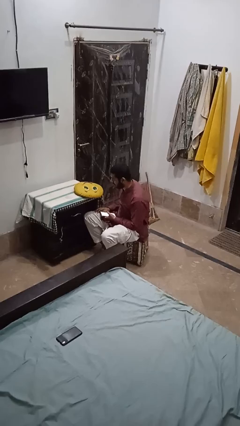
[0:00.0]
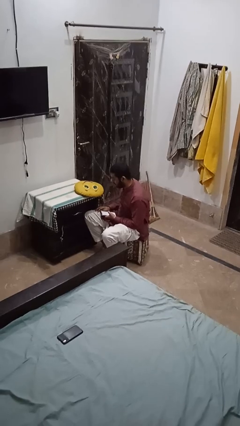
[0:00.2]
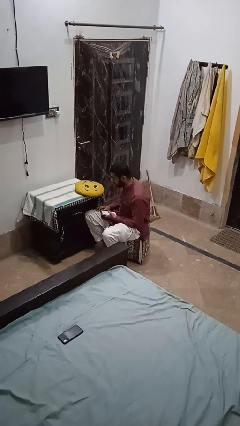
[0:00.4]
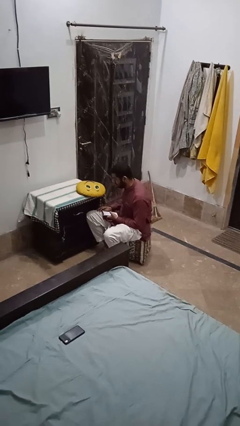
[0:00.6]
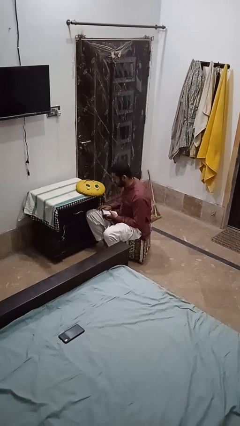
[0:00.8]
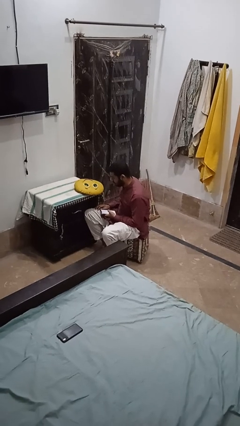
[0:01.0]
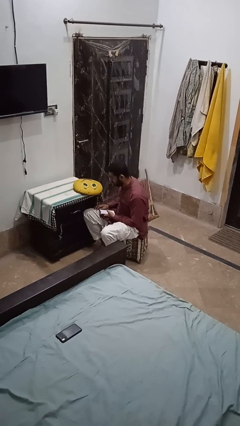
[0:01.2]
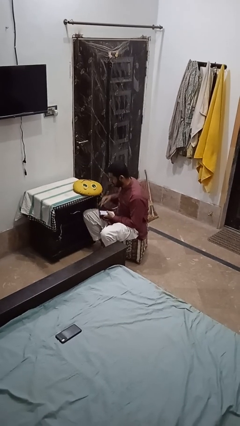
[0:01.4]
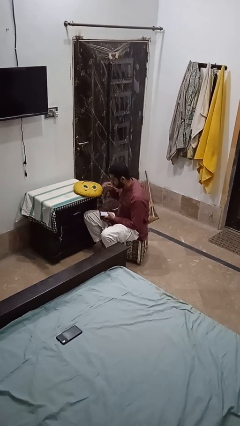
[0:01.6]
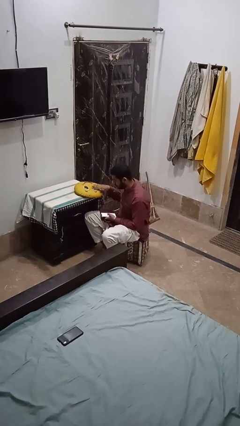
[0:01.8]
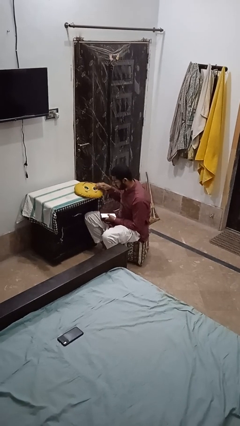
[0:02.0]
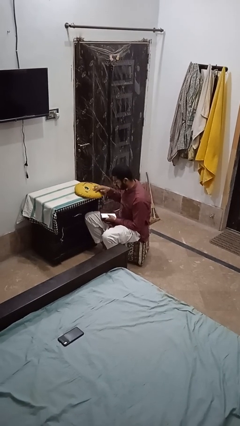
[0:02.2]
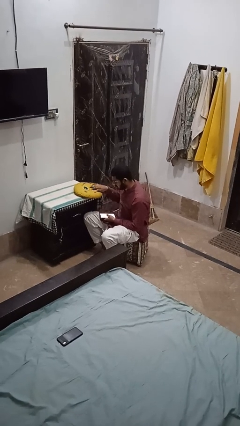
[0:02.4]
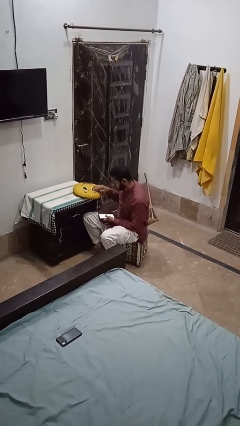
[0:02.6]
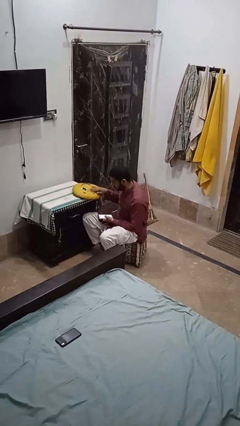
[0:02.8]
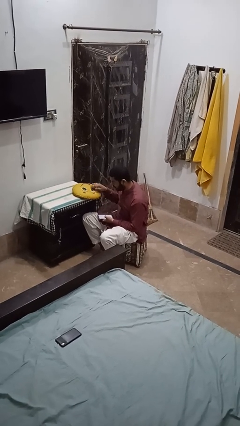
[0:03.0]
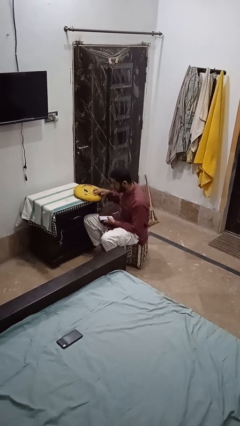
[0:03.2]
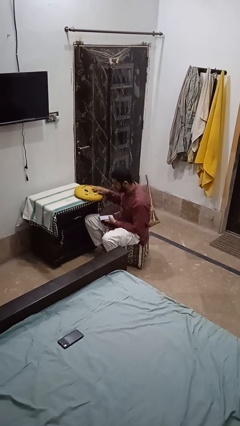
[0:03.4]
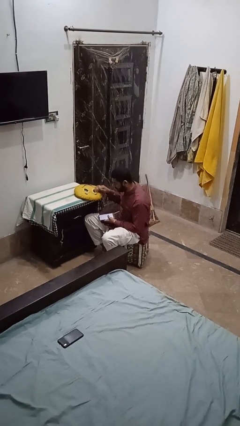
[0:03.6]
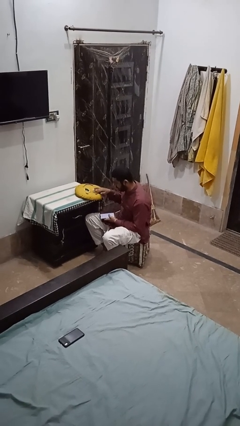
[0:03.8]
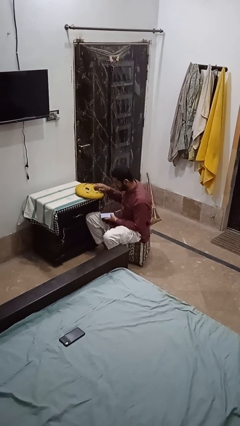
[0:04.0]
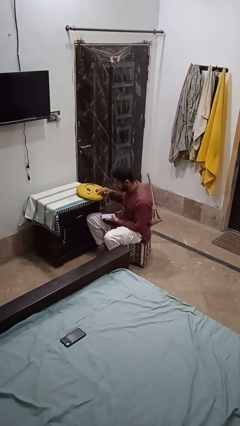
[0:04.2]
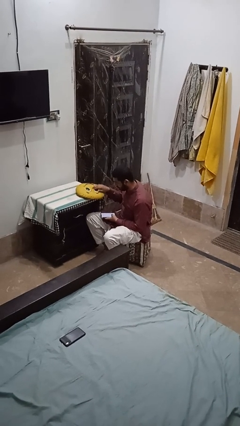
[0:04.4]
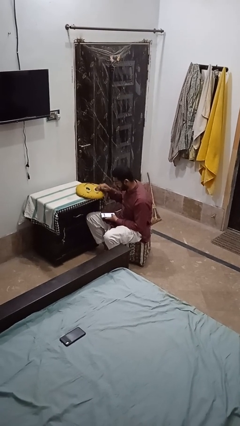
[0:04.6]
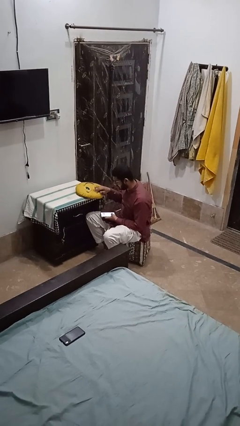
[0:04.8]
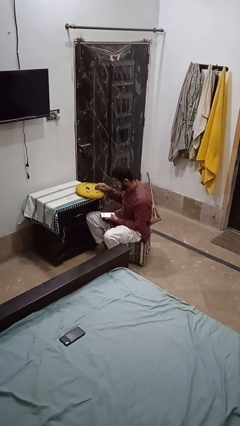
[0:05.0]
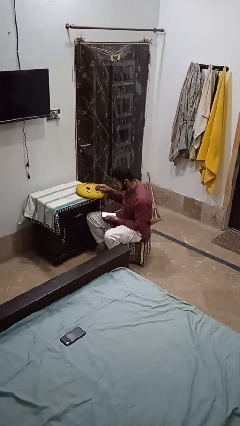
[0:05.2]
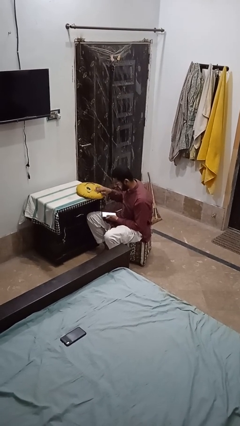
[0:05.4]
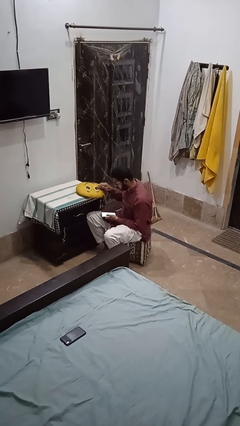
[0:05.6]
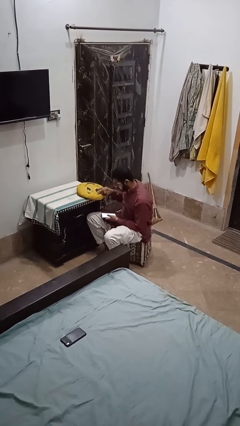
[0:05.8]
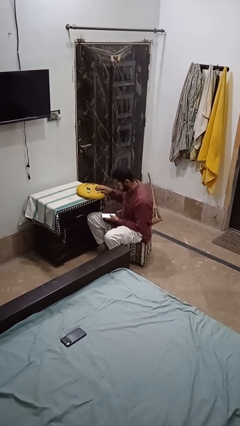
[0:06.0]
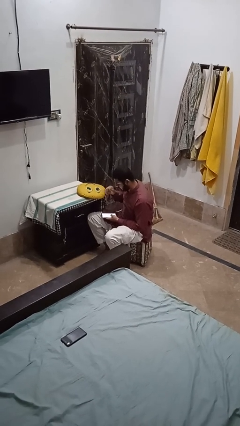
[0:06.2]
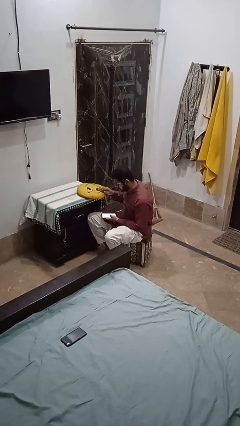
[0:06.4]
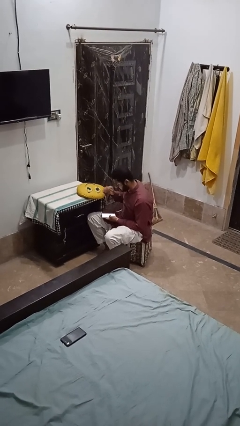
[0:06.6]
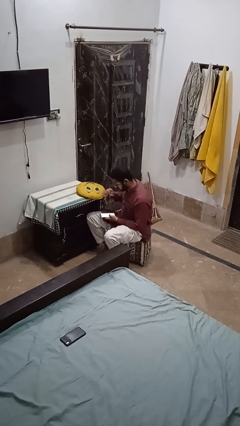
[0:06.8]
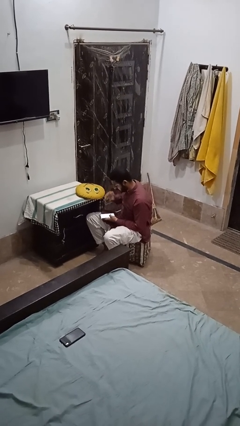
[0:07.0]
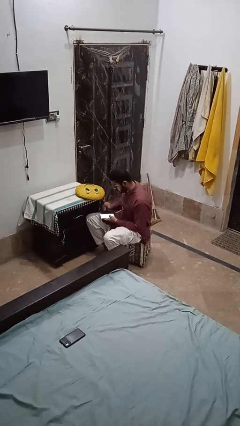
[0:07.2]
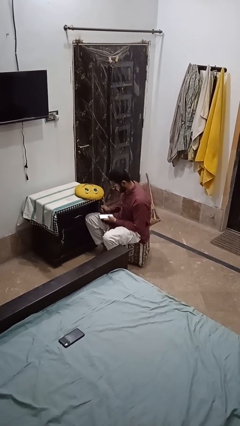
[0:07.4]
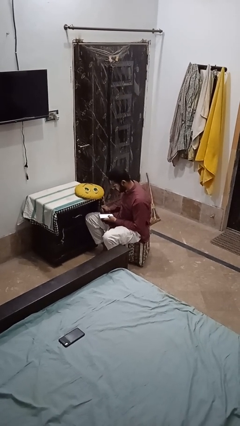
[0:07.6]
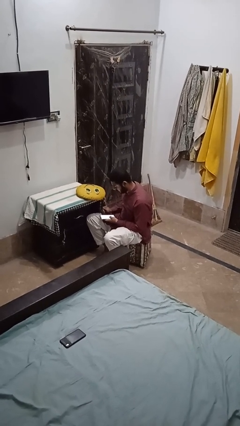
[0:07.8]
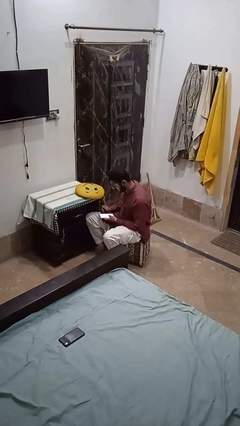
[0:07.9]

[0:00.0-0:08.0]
person waves hand over object

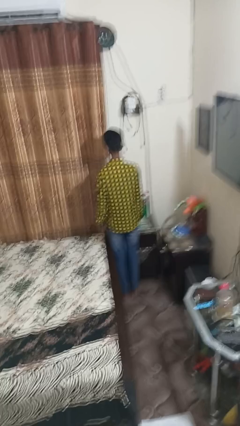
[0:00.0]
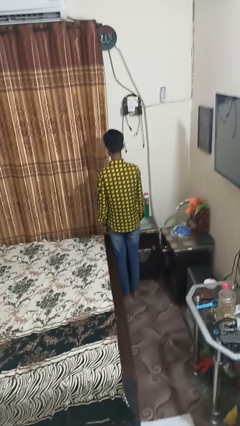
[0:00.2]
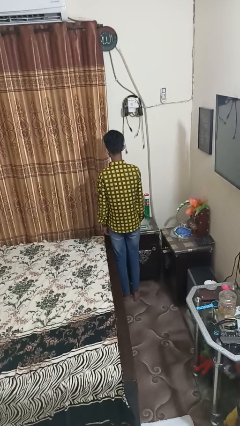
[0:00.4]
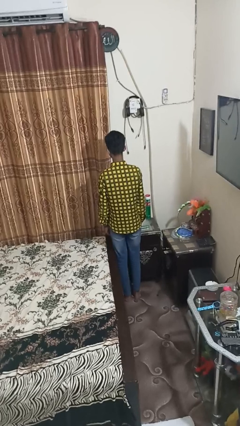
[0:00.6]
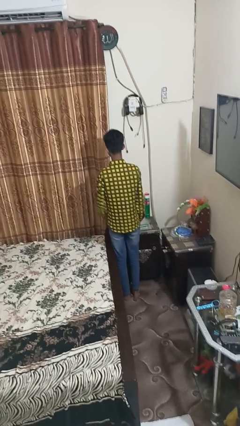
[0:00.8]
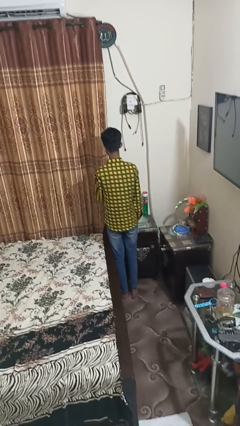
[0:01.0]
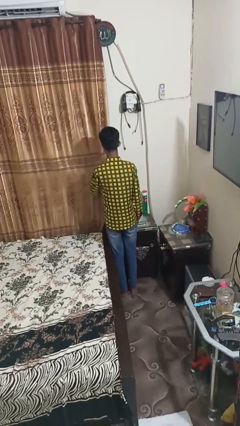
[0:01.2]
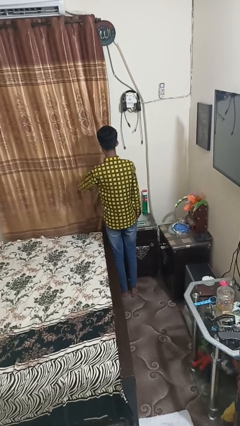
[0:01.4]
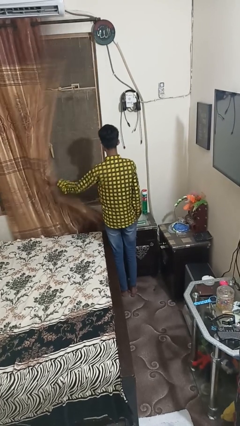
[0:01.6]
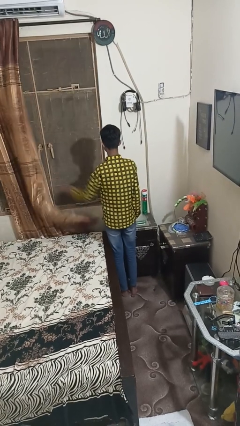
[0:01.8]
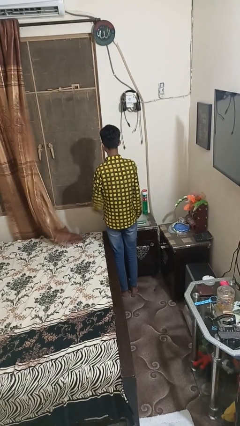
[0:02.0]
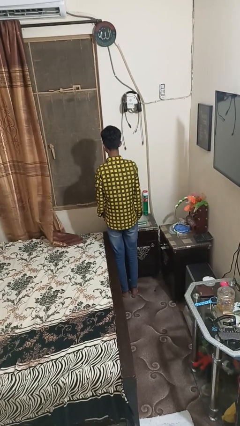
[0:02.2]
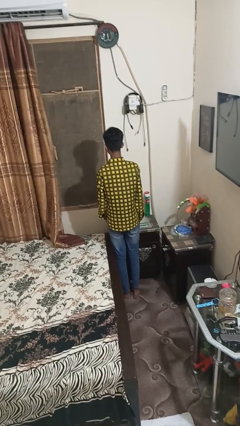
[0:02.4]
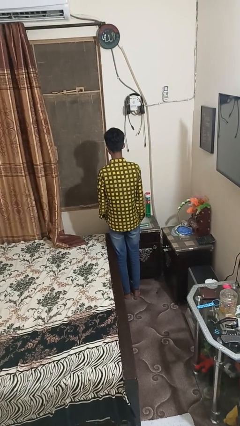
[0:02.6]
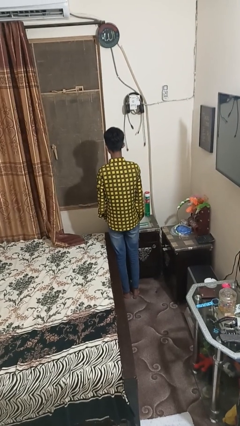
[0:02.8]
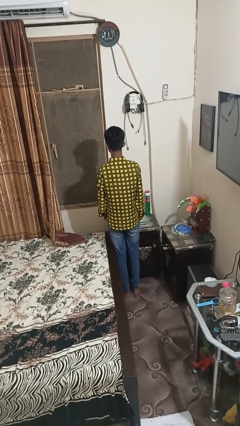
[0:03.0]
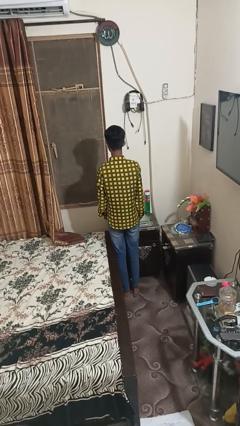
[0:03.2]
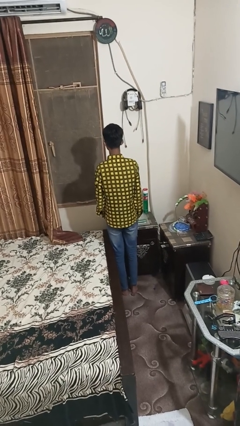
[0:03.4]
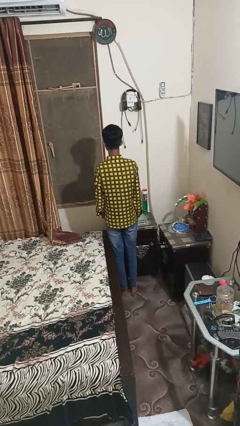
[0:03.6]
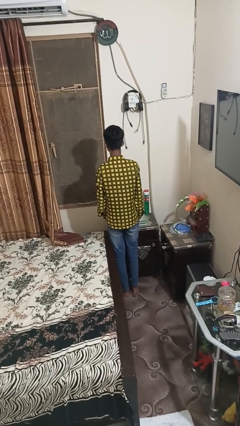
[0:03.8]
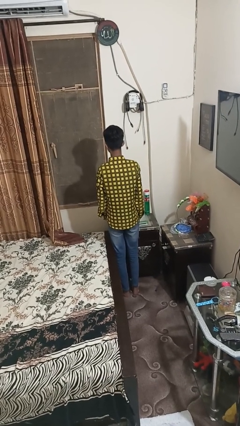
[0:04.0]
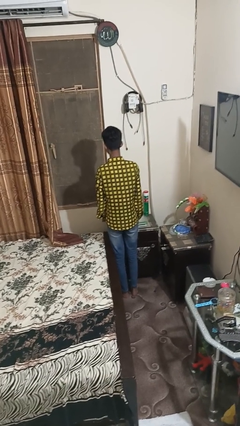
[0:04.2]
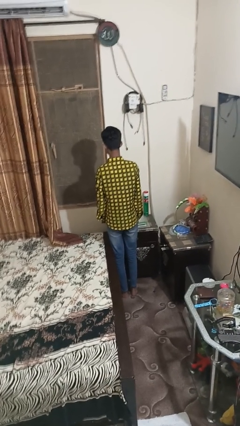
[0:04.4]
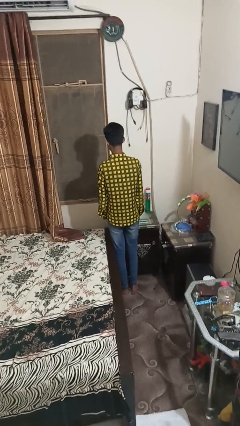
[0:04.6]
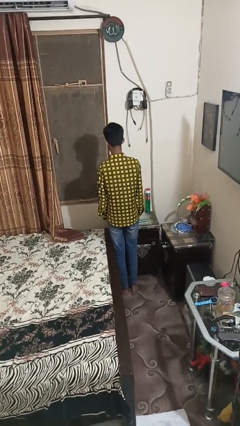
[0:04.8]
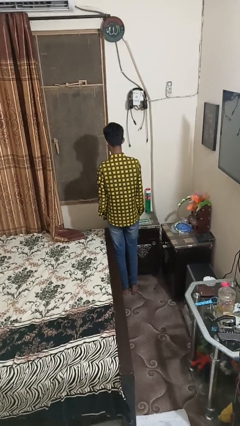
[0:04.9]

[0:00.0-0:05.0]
person opens curtains

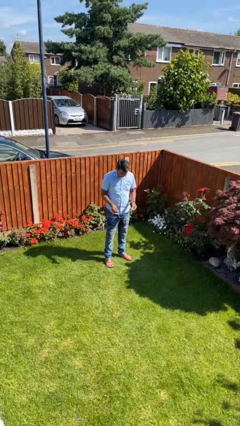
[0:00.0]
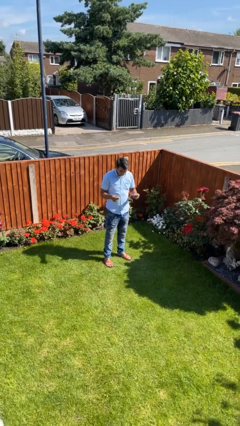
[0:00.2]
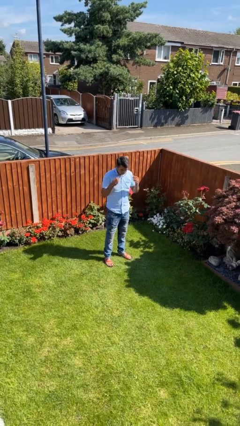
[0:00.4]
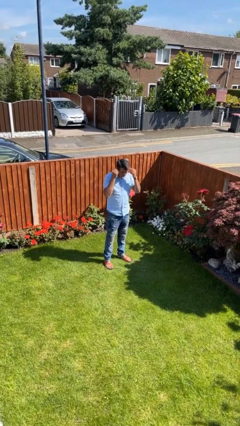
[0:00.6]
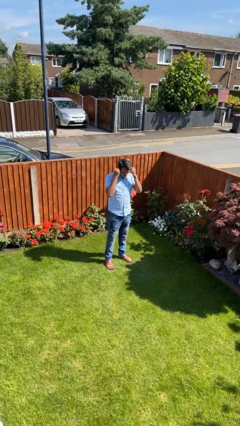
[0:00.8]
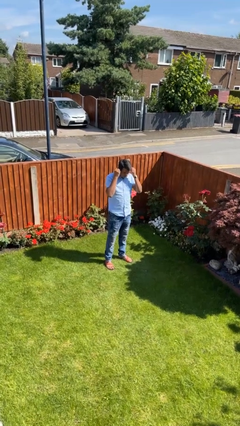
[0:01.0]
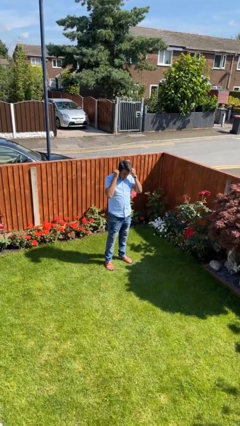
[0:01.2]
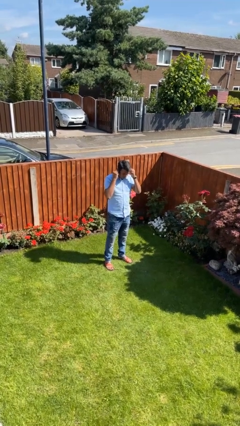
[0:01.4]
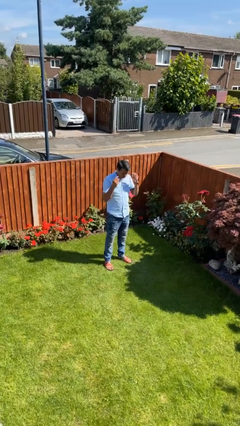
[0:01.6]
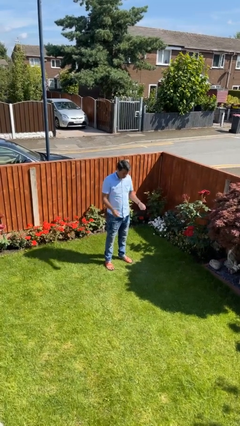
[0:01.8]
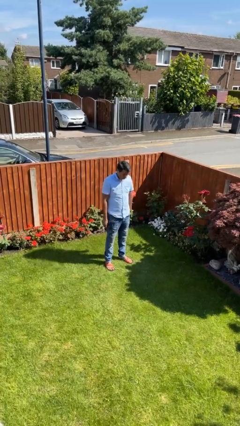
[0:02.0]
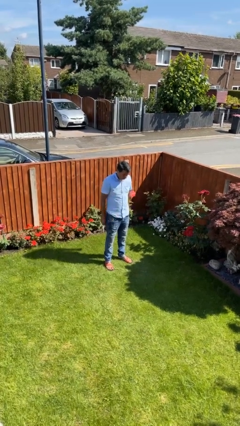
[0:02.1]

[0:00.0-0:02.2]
person puts on headphones

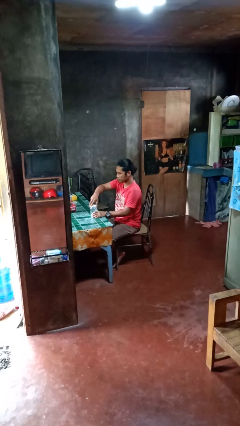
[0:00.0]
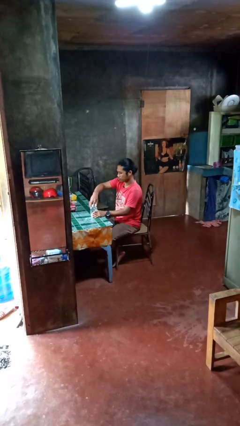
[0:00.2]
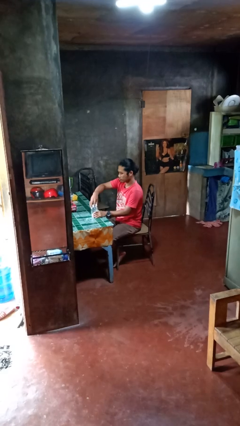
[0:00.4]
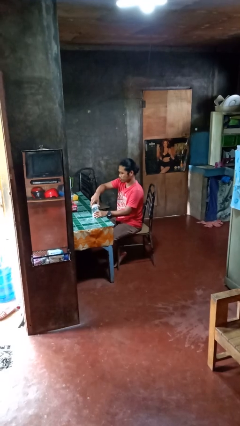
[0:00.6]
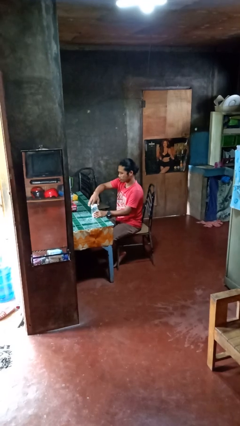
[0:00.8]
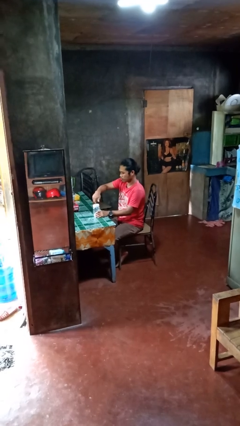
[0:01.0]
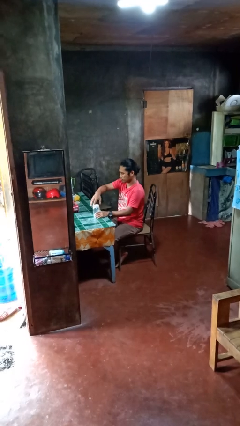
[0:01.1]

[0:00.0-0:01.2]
person closes jar

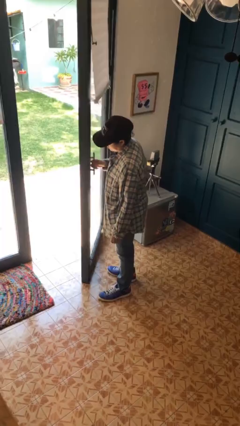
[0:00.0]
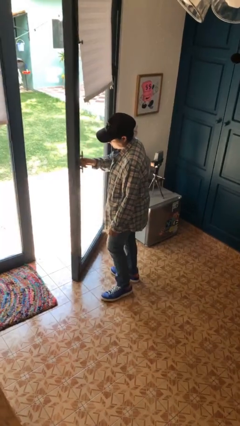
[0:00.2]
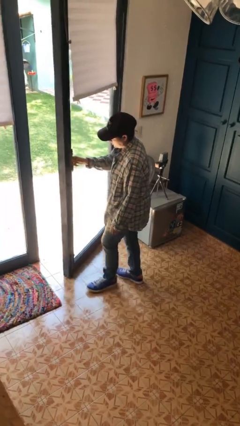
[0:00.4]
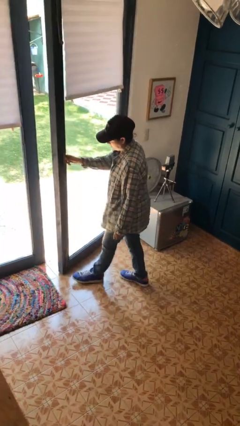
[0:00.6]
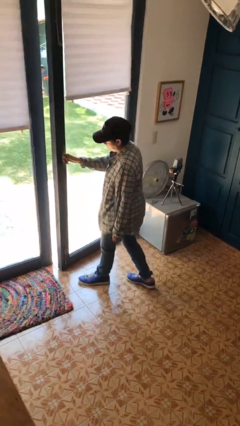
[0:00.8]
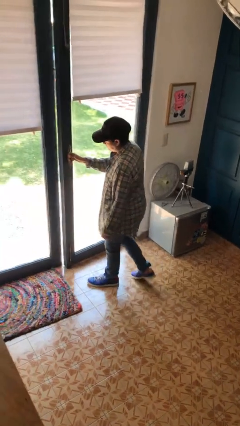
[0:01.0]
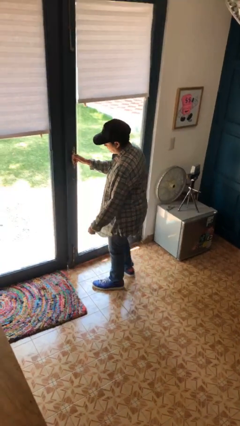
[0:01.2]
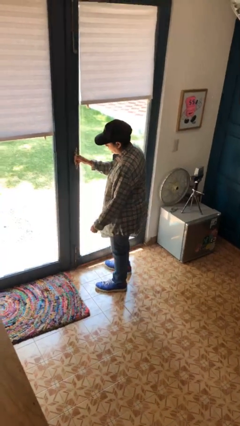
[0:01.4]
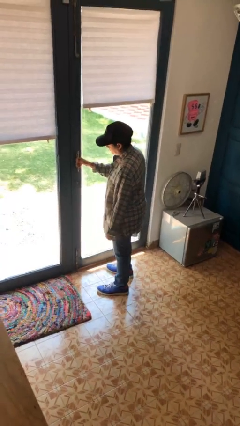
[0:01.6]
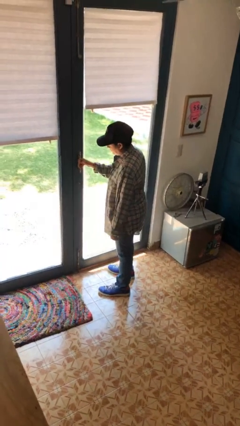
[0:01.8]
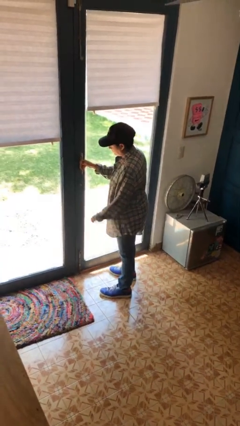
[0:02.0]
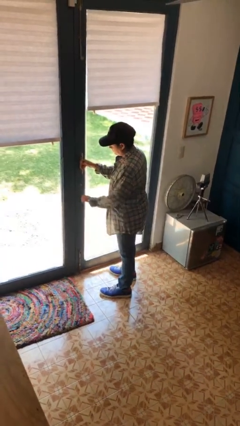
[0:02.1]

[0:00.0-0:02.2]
person closes facility door
